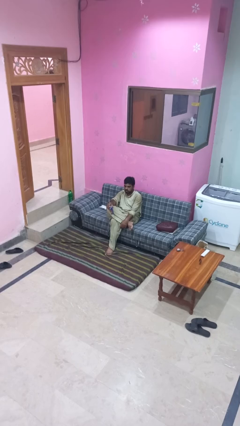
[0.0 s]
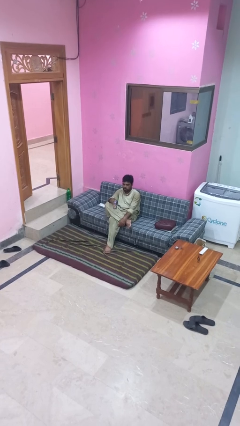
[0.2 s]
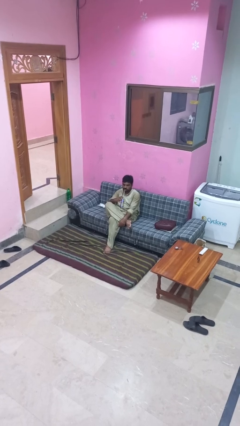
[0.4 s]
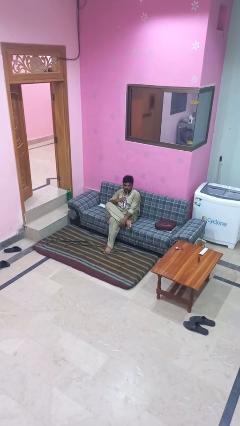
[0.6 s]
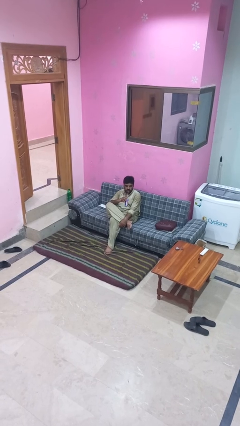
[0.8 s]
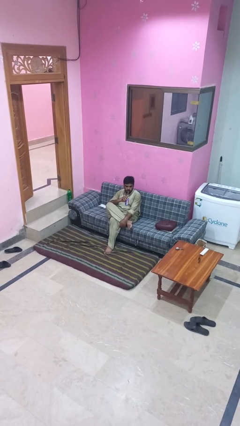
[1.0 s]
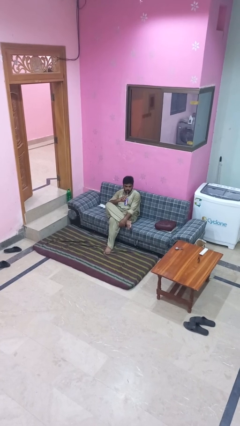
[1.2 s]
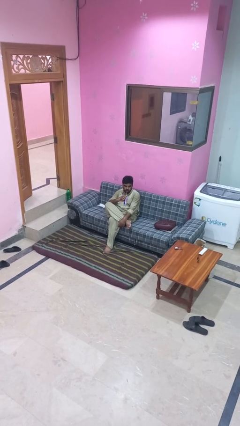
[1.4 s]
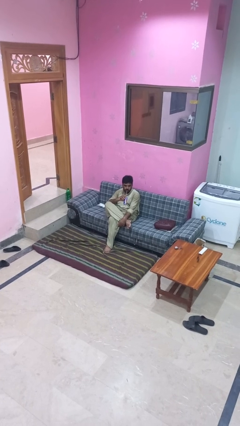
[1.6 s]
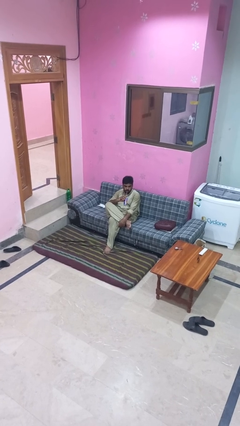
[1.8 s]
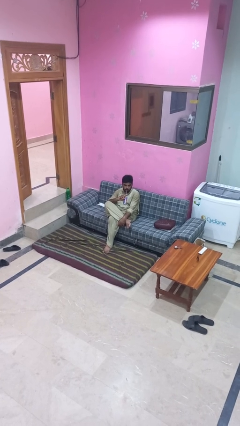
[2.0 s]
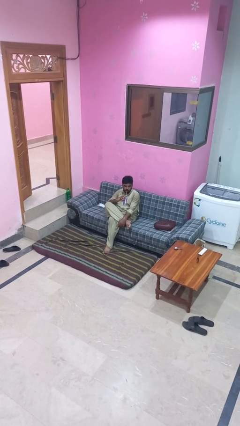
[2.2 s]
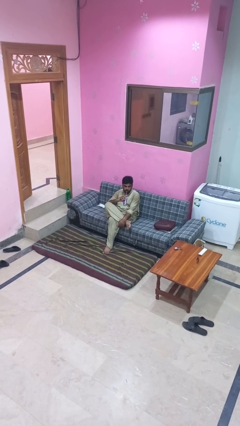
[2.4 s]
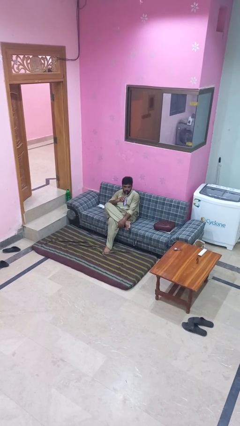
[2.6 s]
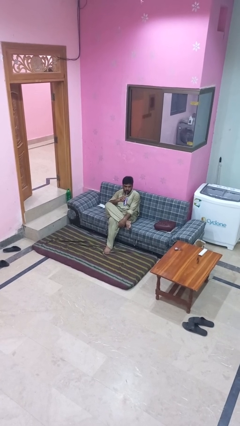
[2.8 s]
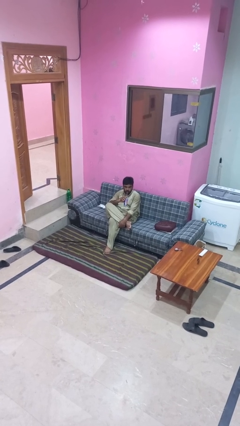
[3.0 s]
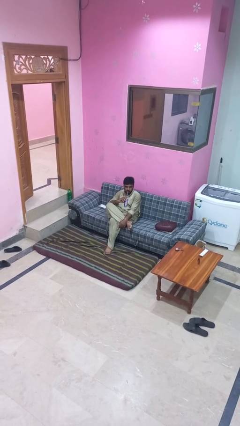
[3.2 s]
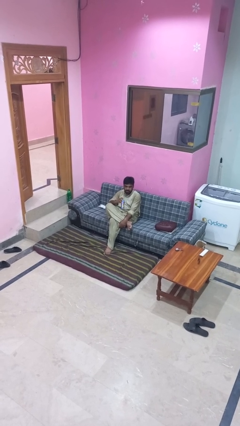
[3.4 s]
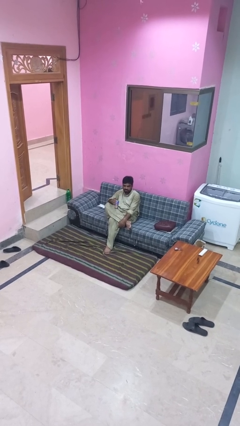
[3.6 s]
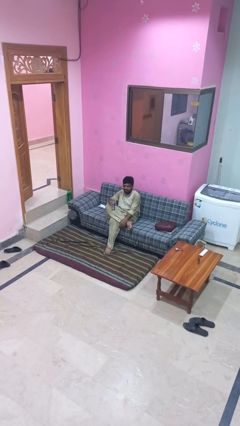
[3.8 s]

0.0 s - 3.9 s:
person drinks from straw

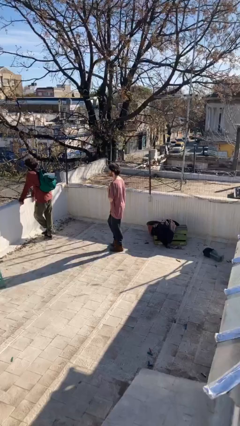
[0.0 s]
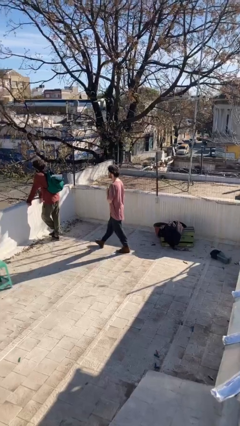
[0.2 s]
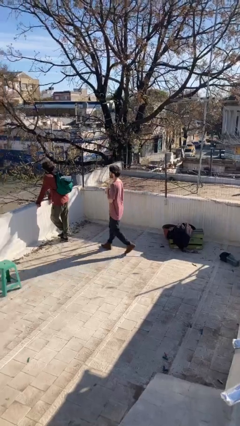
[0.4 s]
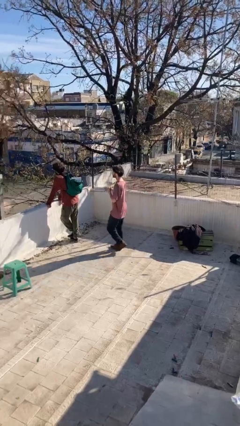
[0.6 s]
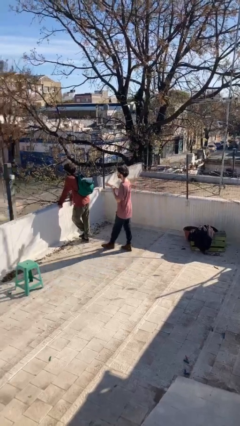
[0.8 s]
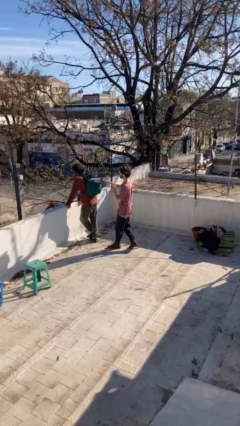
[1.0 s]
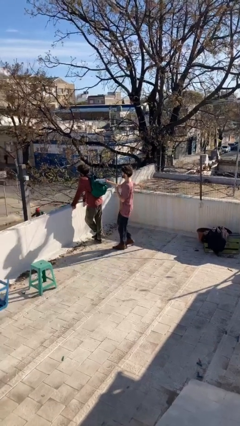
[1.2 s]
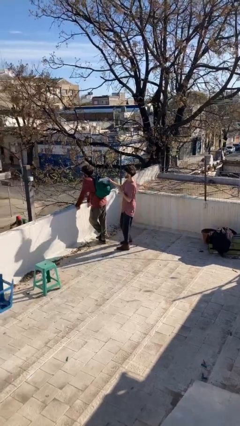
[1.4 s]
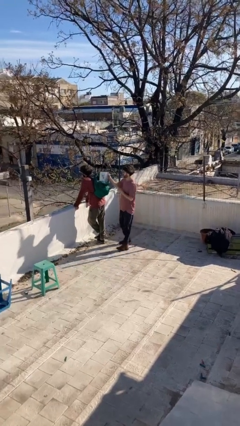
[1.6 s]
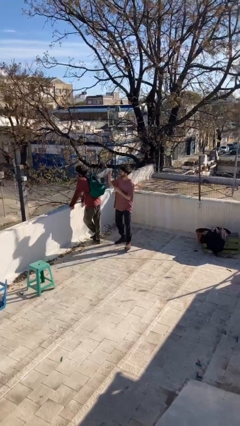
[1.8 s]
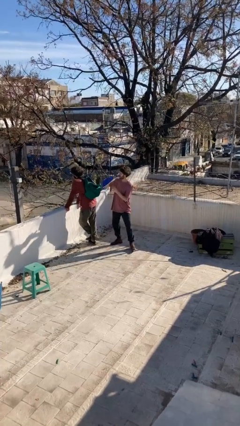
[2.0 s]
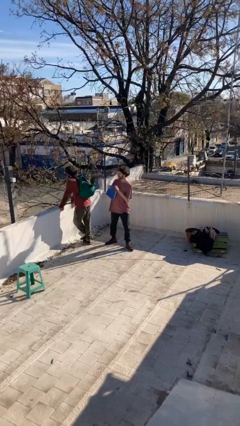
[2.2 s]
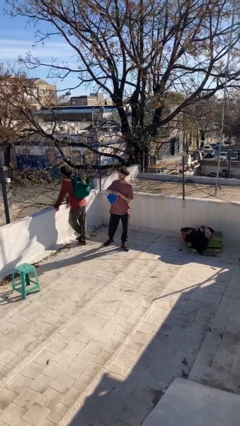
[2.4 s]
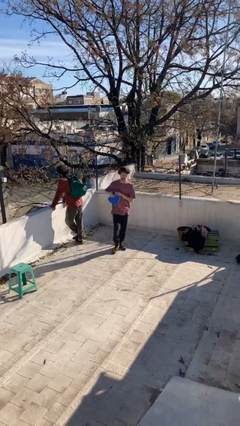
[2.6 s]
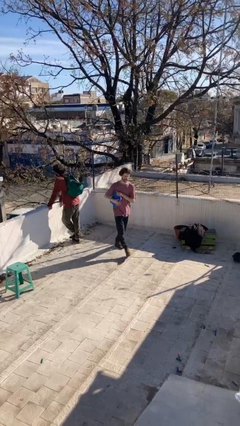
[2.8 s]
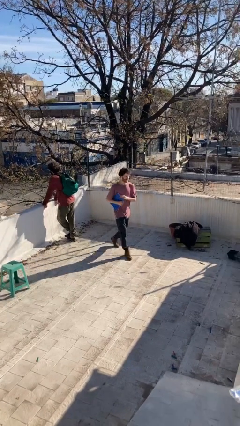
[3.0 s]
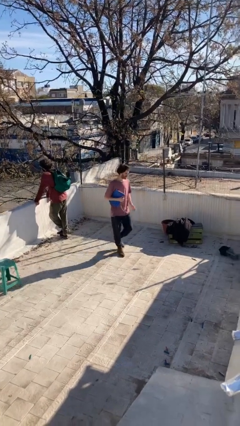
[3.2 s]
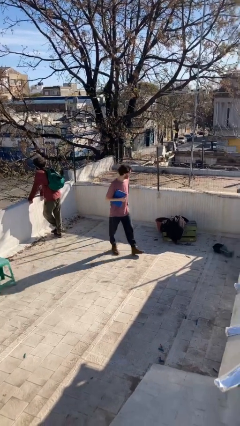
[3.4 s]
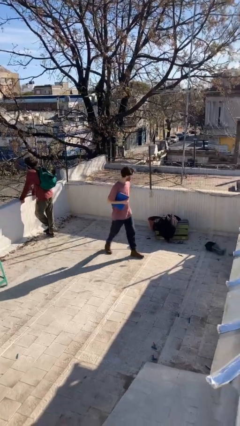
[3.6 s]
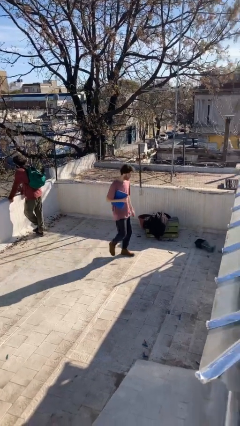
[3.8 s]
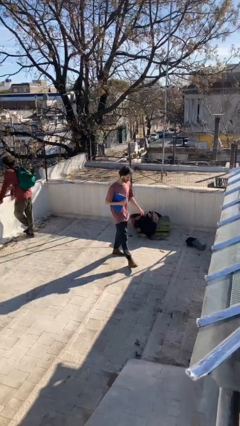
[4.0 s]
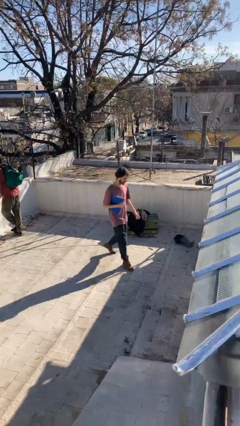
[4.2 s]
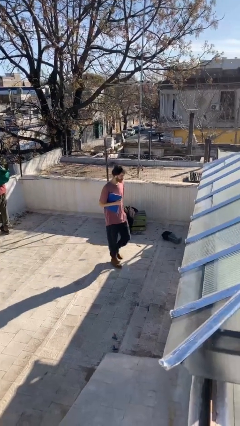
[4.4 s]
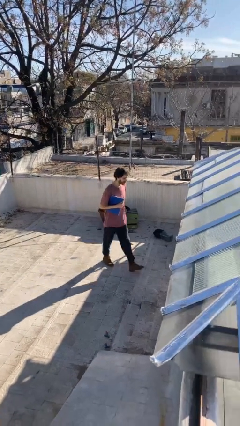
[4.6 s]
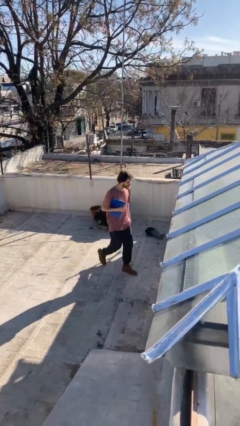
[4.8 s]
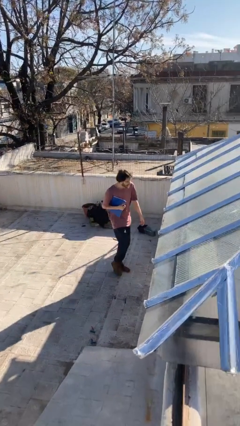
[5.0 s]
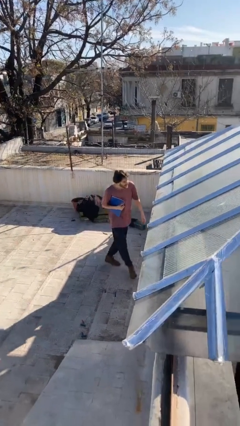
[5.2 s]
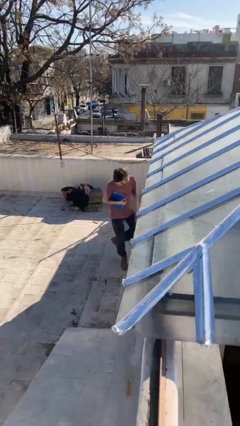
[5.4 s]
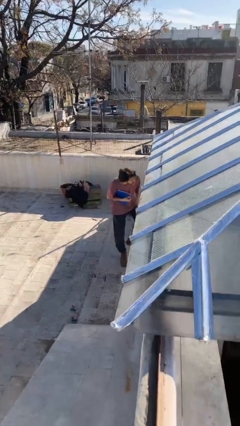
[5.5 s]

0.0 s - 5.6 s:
person steals object from person

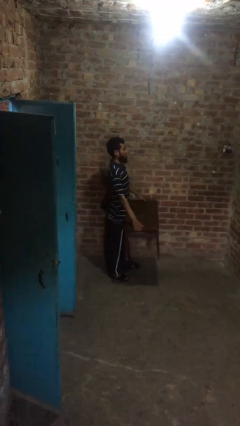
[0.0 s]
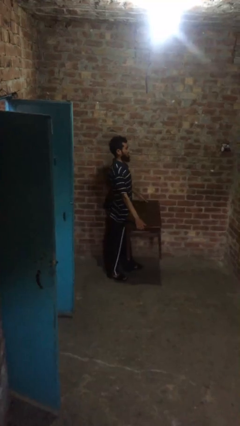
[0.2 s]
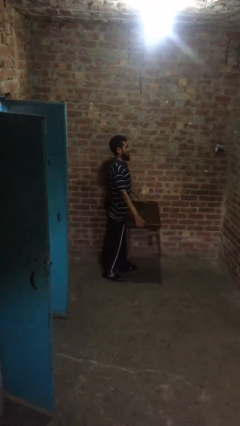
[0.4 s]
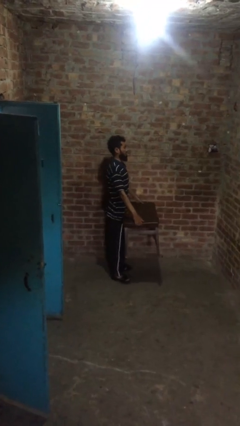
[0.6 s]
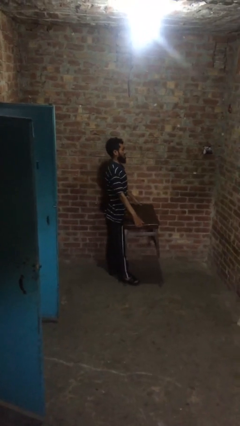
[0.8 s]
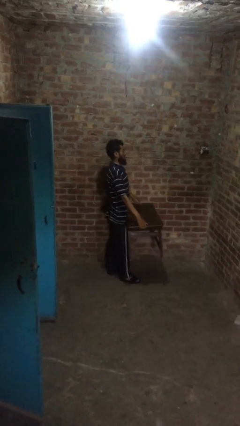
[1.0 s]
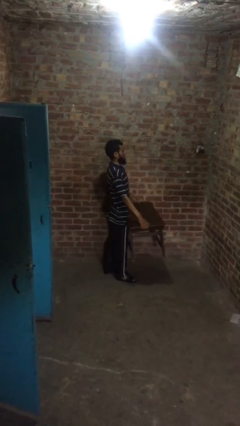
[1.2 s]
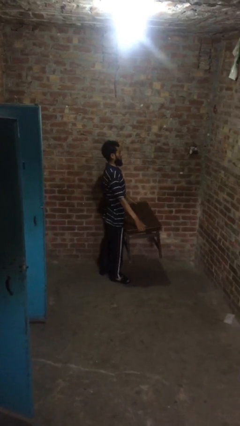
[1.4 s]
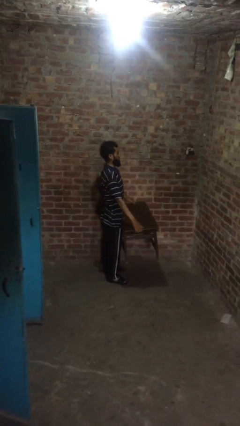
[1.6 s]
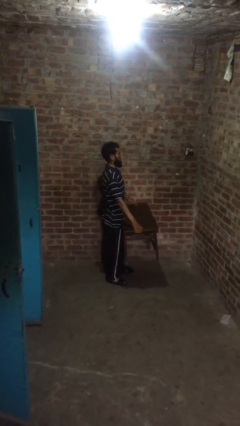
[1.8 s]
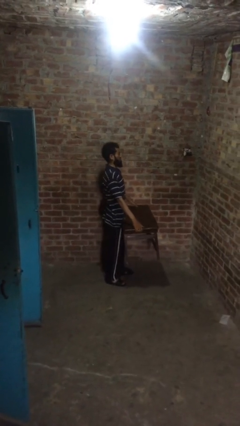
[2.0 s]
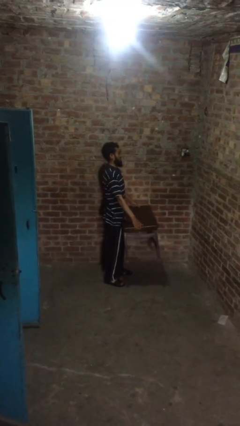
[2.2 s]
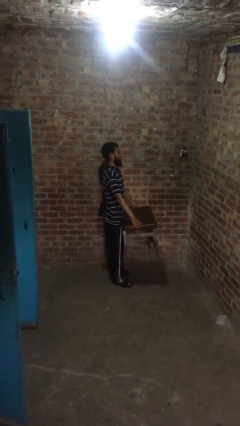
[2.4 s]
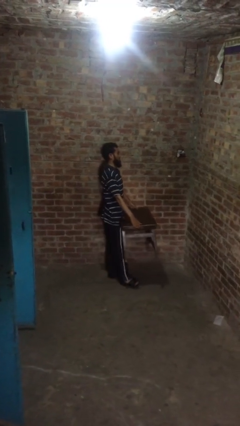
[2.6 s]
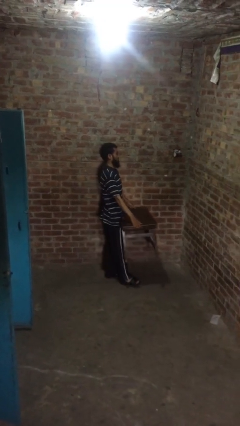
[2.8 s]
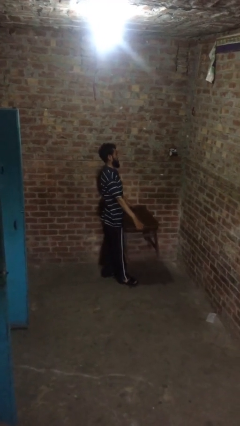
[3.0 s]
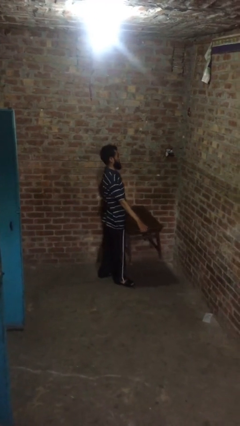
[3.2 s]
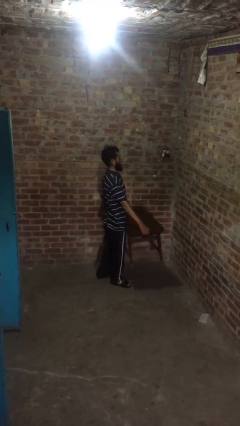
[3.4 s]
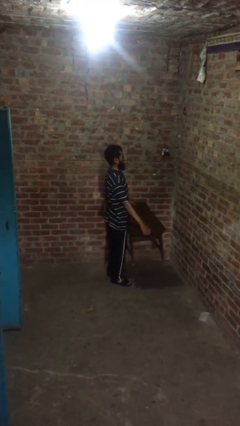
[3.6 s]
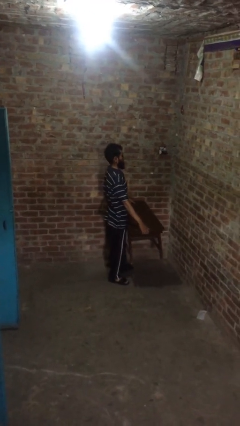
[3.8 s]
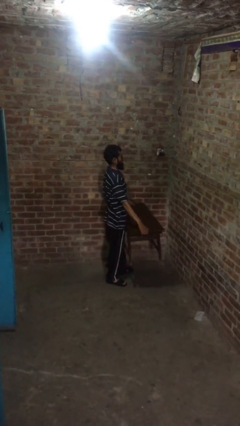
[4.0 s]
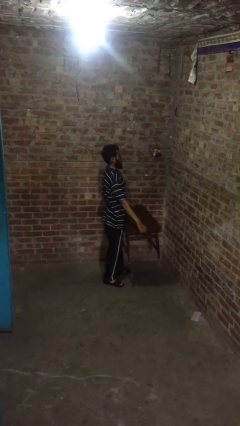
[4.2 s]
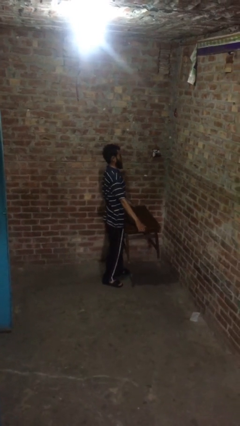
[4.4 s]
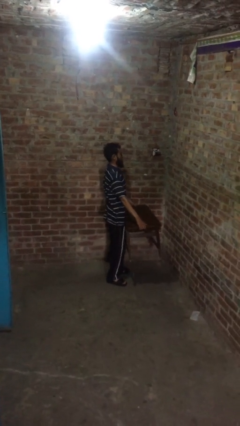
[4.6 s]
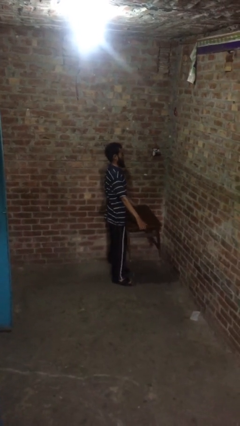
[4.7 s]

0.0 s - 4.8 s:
person carries heavy object

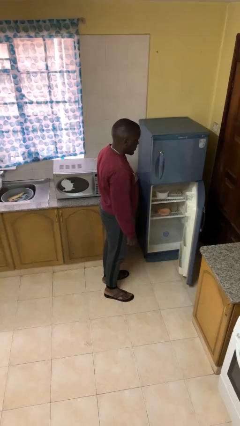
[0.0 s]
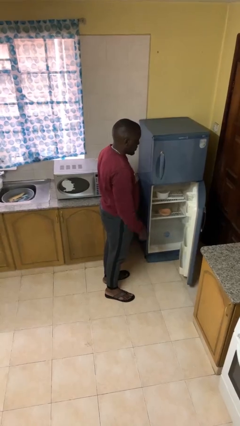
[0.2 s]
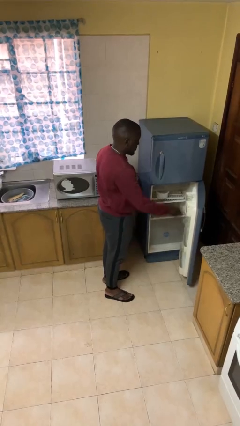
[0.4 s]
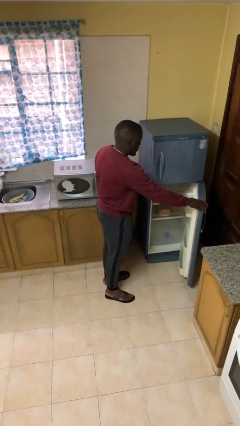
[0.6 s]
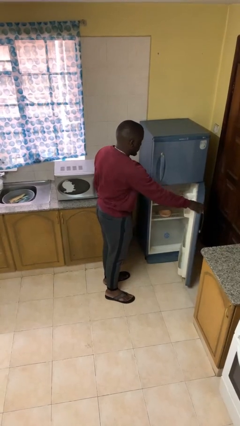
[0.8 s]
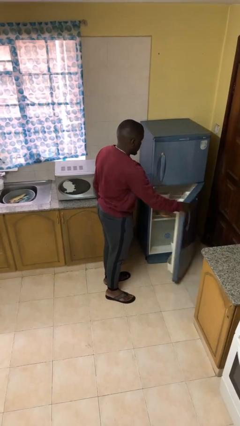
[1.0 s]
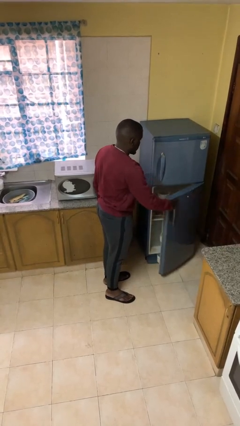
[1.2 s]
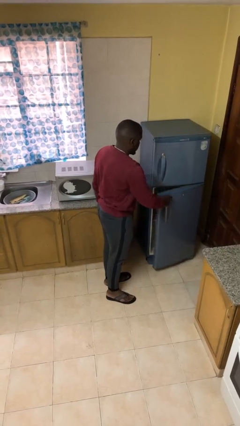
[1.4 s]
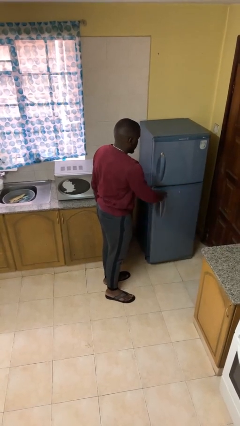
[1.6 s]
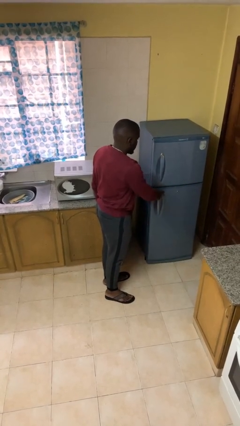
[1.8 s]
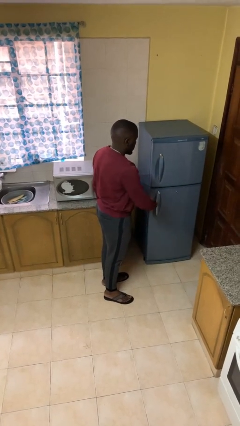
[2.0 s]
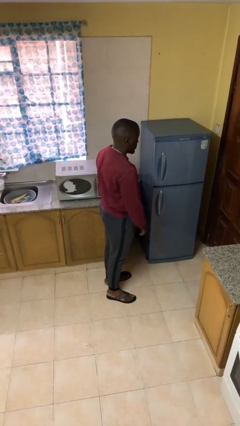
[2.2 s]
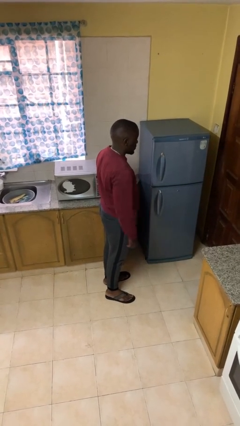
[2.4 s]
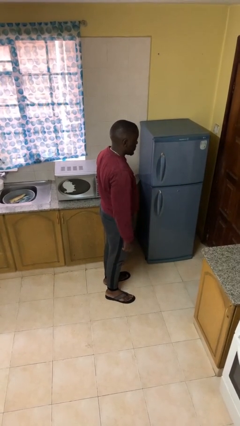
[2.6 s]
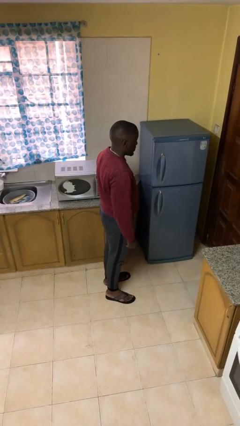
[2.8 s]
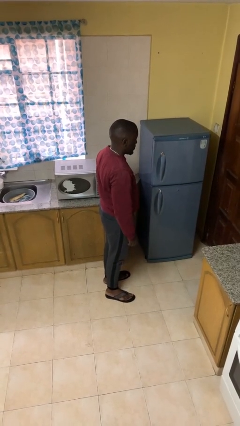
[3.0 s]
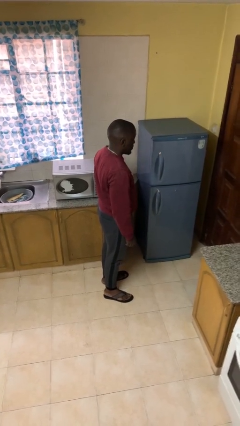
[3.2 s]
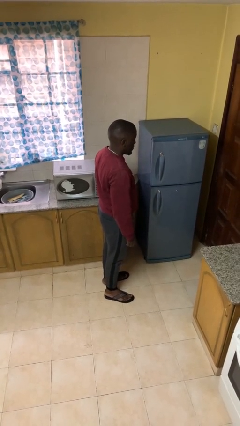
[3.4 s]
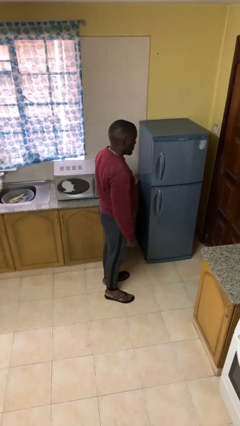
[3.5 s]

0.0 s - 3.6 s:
person closes refrigerator
